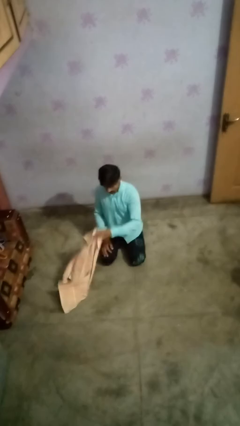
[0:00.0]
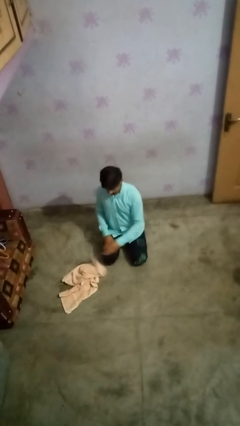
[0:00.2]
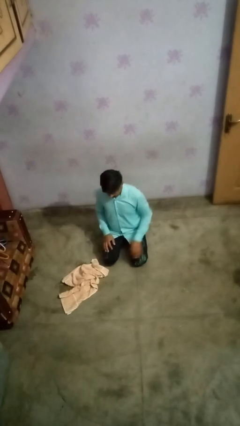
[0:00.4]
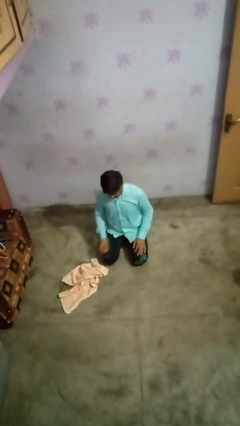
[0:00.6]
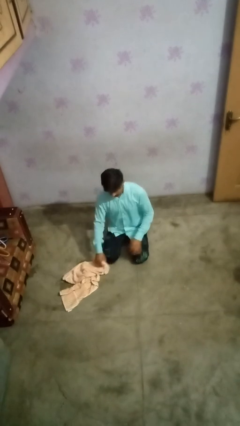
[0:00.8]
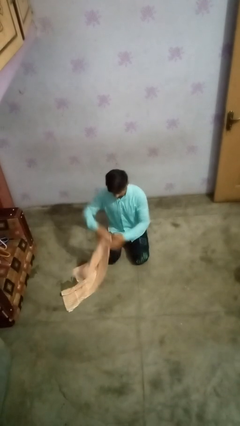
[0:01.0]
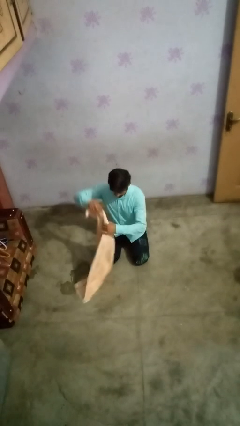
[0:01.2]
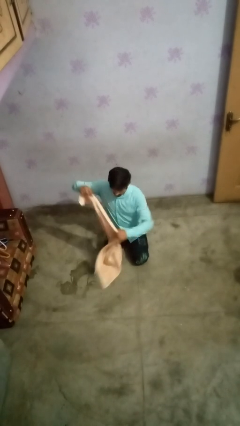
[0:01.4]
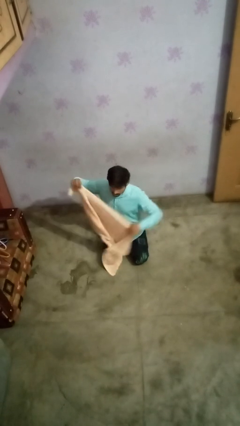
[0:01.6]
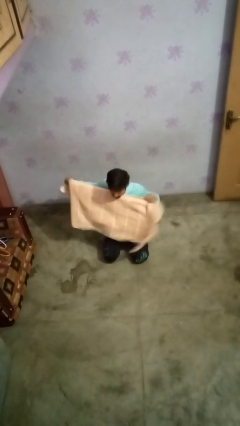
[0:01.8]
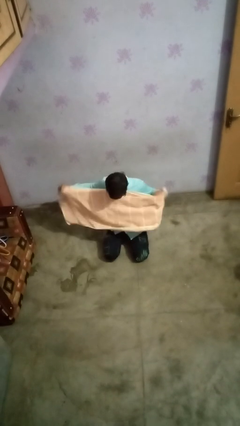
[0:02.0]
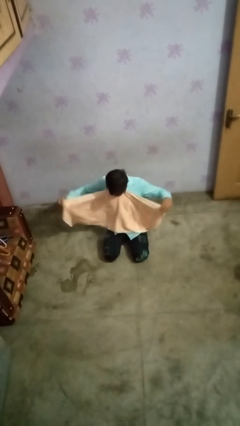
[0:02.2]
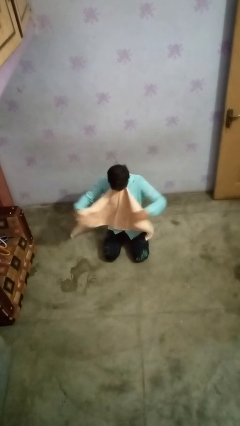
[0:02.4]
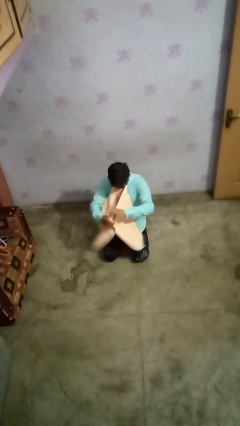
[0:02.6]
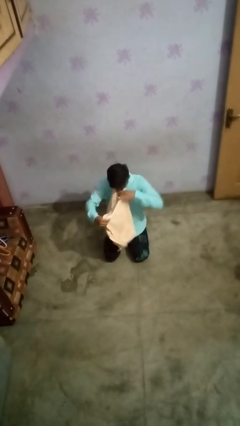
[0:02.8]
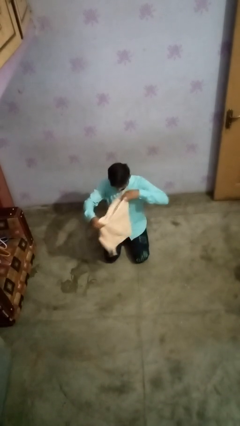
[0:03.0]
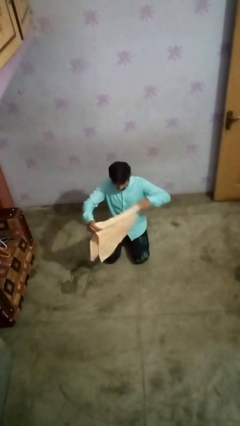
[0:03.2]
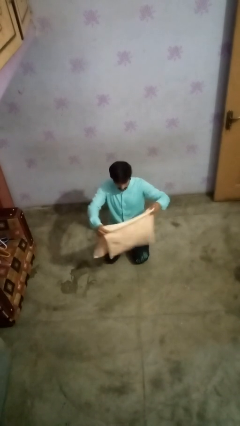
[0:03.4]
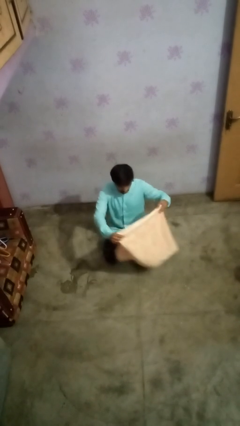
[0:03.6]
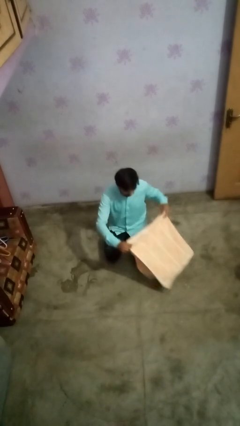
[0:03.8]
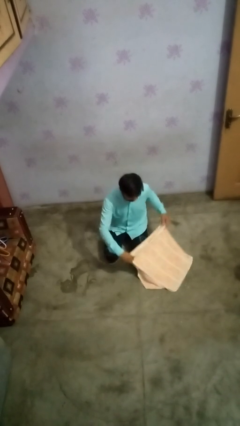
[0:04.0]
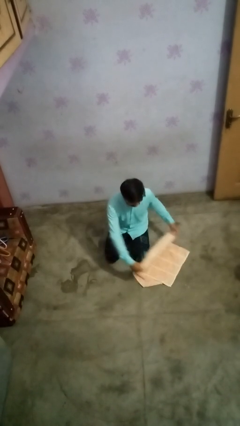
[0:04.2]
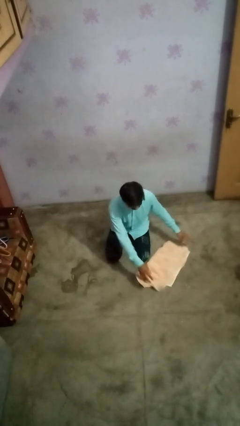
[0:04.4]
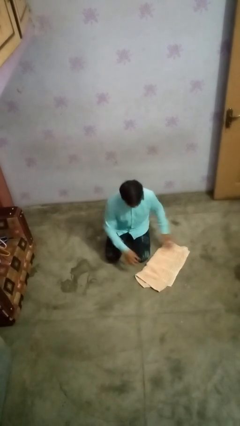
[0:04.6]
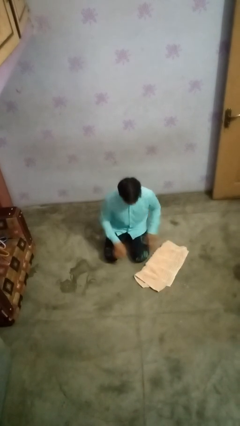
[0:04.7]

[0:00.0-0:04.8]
person folds towel

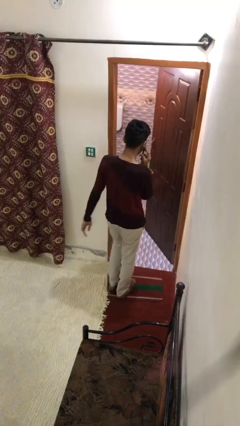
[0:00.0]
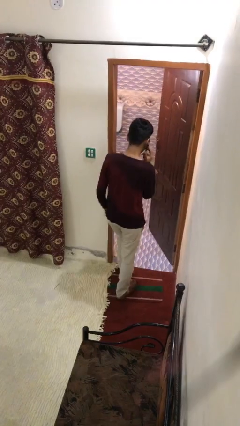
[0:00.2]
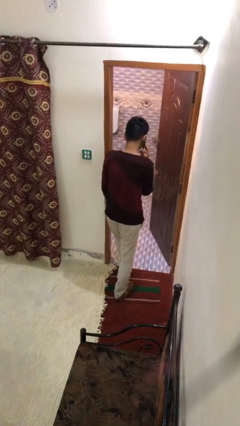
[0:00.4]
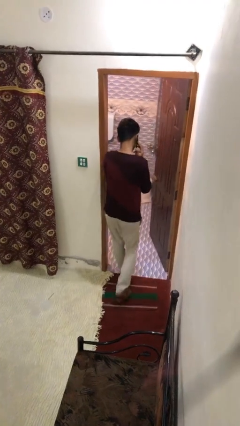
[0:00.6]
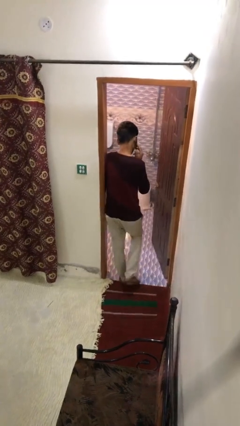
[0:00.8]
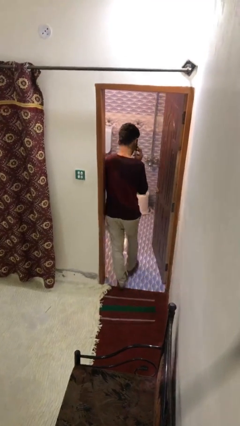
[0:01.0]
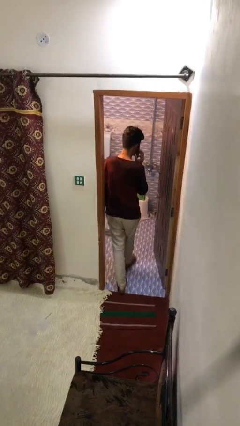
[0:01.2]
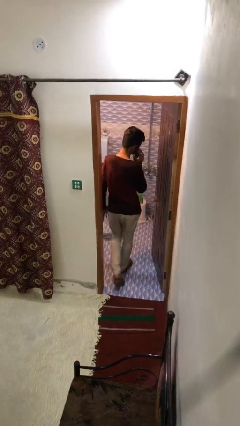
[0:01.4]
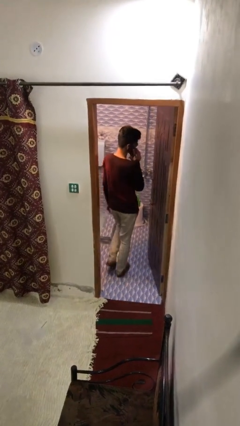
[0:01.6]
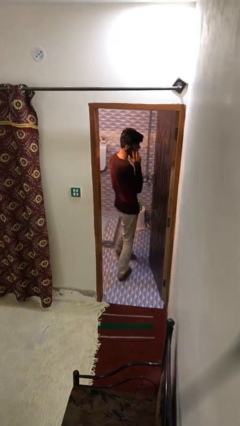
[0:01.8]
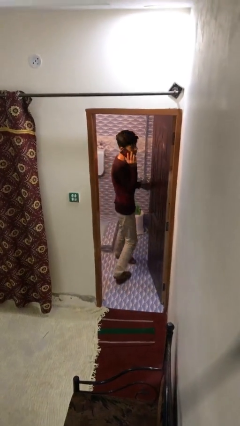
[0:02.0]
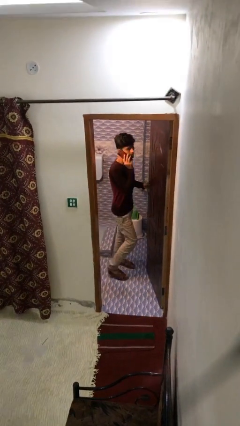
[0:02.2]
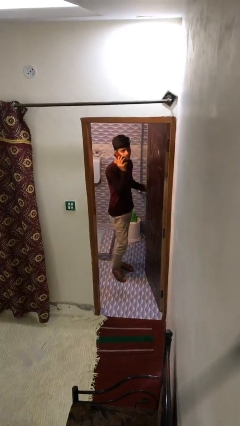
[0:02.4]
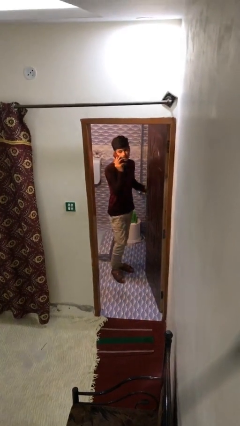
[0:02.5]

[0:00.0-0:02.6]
person exits scene through structure

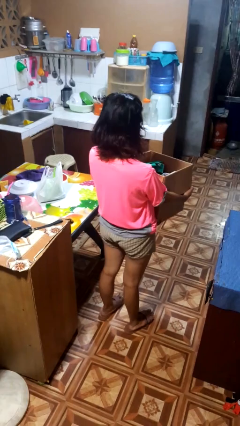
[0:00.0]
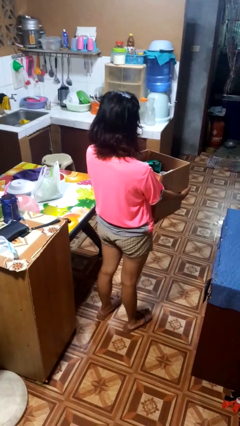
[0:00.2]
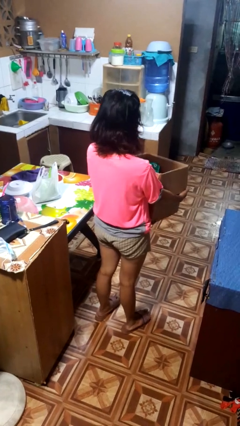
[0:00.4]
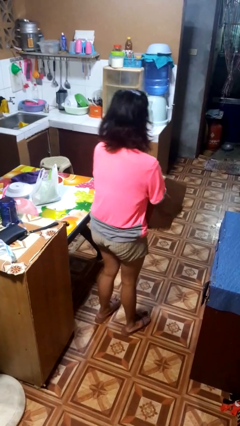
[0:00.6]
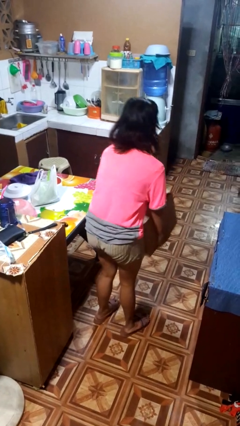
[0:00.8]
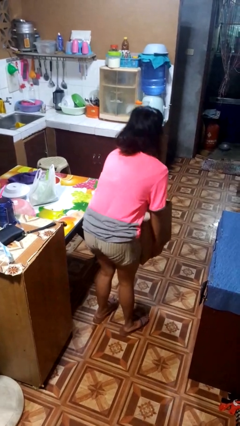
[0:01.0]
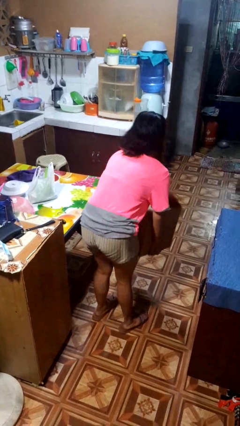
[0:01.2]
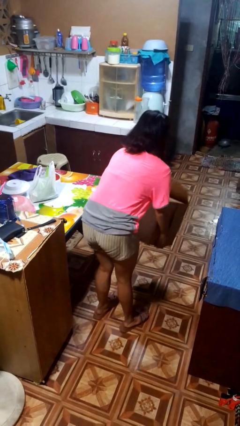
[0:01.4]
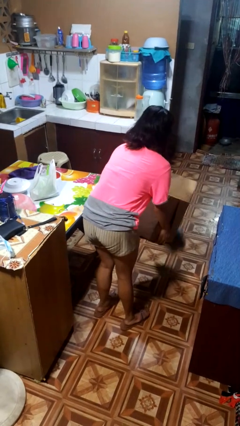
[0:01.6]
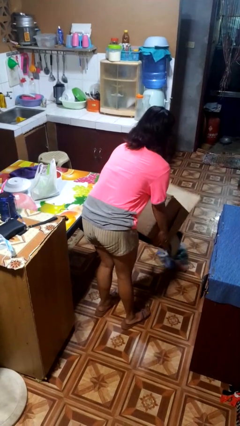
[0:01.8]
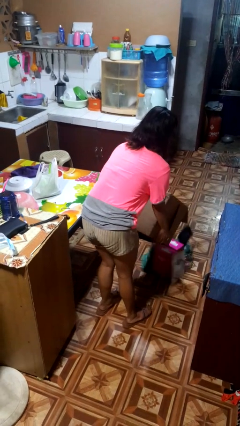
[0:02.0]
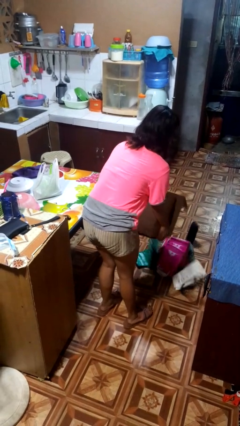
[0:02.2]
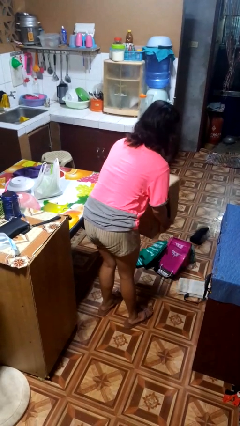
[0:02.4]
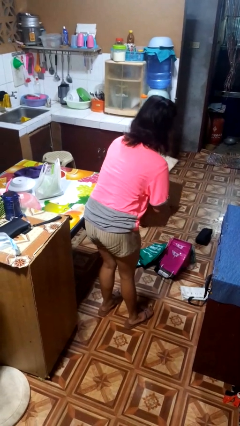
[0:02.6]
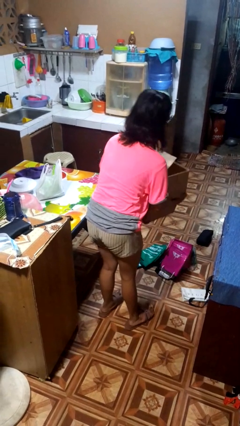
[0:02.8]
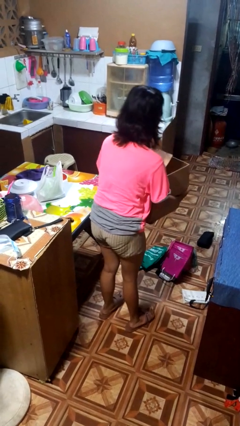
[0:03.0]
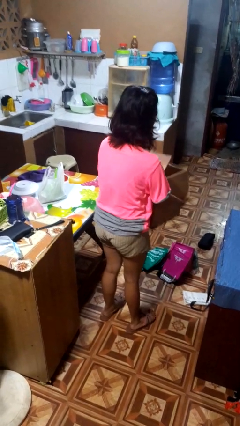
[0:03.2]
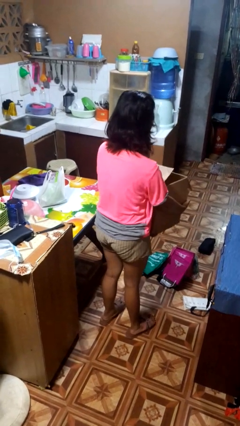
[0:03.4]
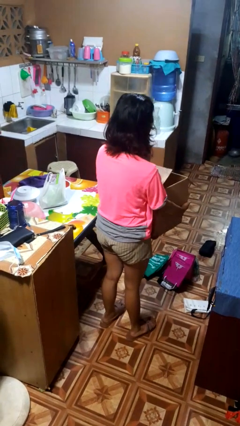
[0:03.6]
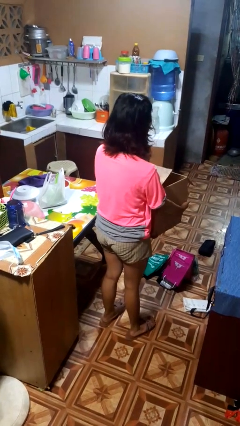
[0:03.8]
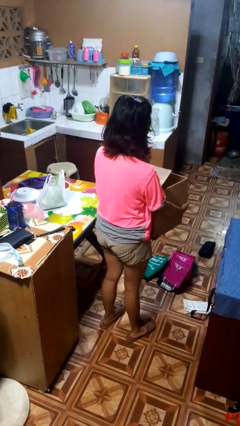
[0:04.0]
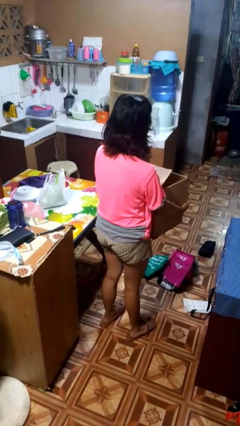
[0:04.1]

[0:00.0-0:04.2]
person unloads box onto floor

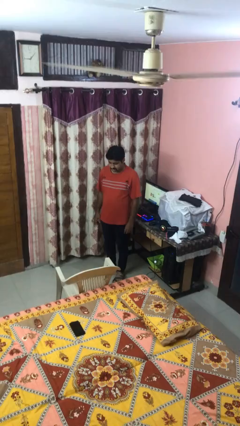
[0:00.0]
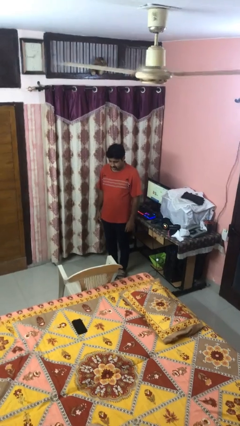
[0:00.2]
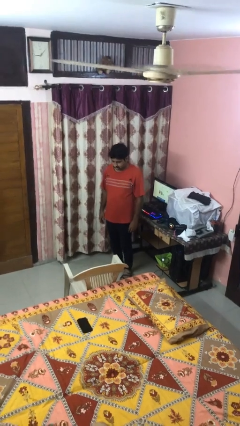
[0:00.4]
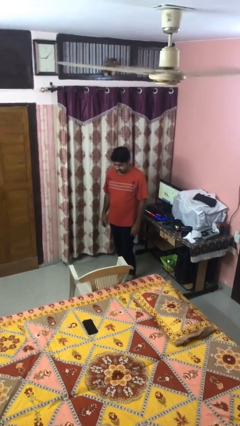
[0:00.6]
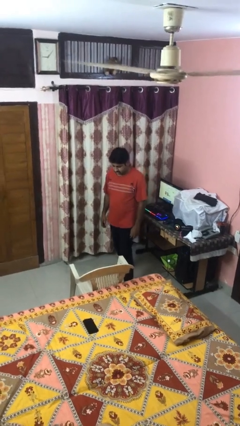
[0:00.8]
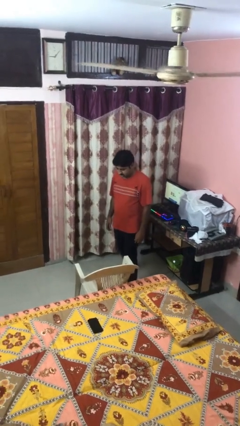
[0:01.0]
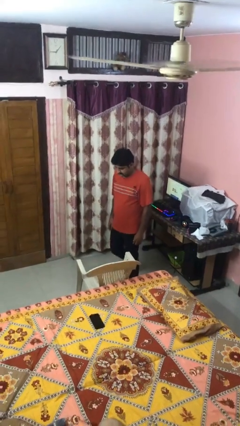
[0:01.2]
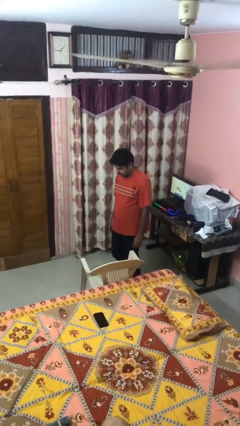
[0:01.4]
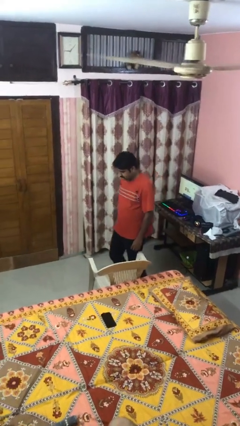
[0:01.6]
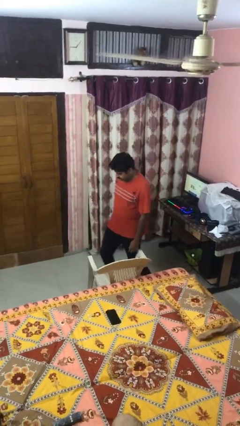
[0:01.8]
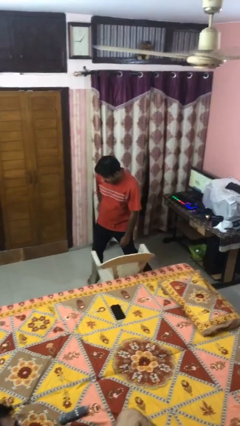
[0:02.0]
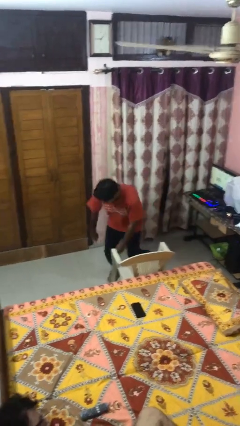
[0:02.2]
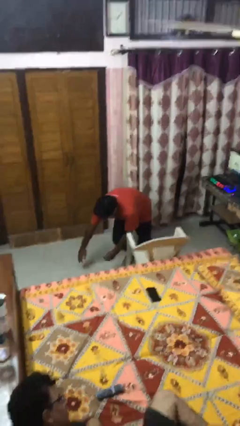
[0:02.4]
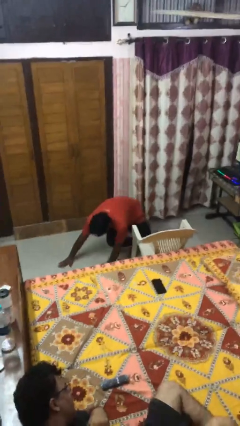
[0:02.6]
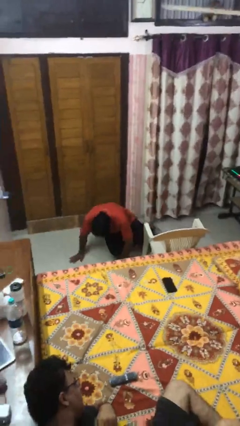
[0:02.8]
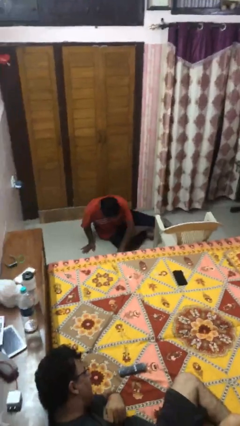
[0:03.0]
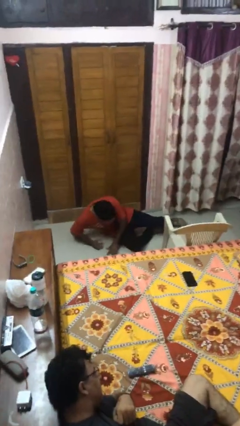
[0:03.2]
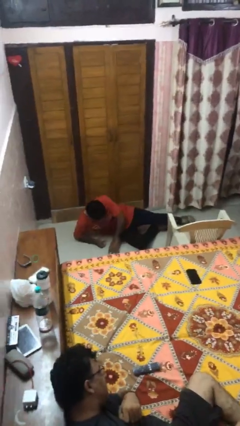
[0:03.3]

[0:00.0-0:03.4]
person trips on object on floor

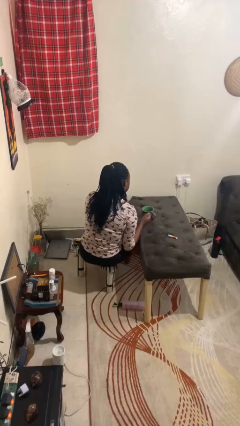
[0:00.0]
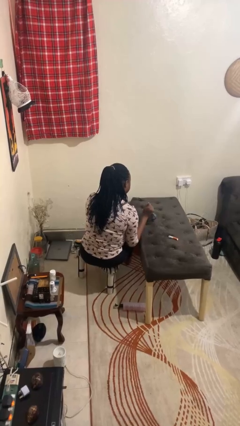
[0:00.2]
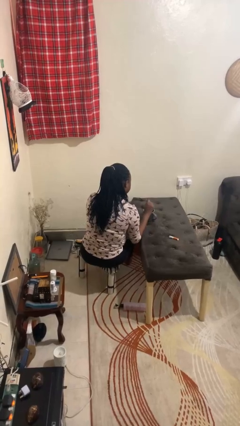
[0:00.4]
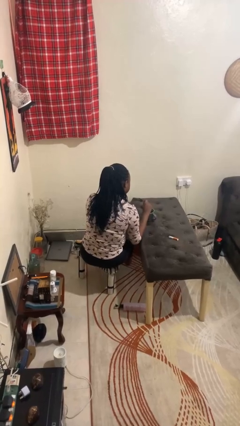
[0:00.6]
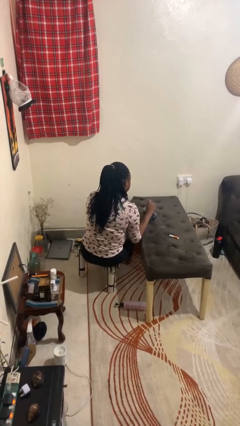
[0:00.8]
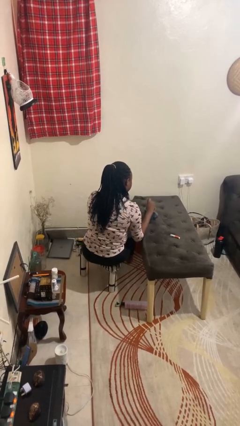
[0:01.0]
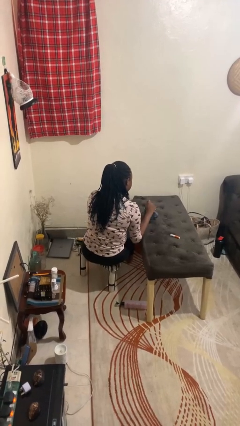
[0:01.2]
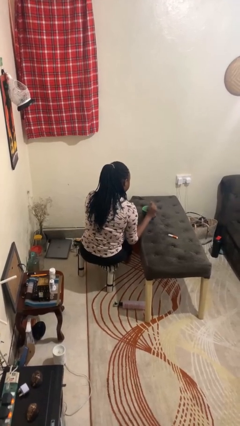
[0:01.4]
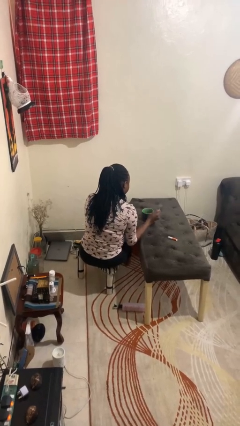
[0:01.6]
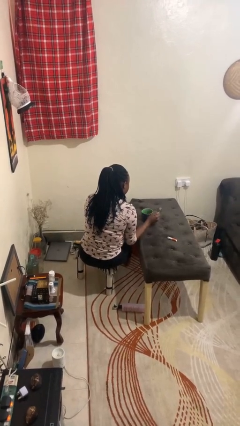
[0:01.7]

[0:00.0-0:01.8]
person stirs mug

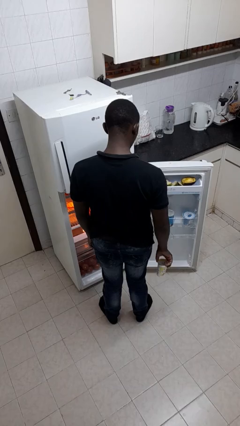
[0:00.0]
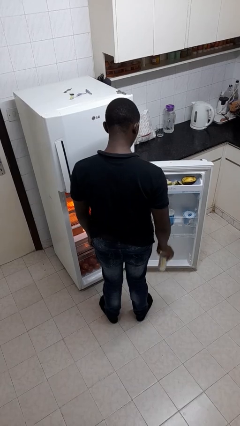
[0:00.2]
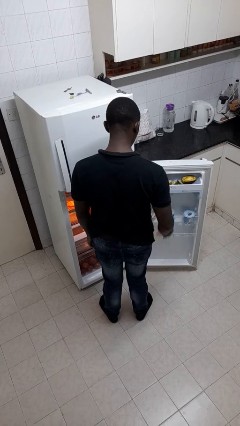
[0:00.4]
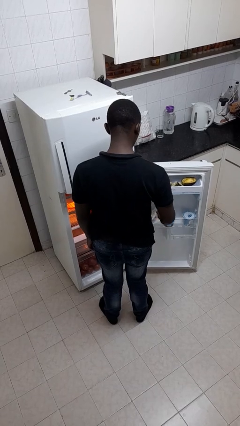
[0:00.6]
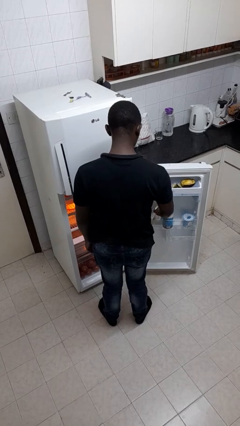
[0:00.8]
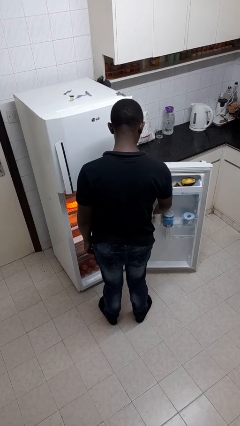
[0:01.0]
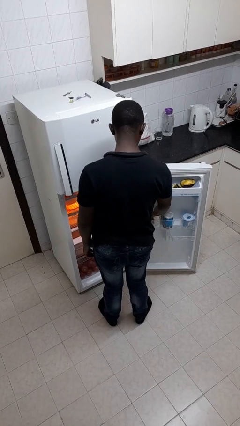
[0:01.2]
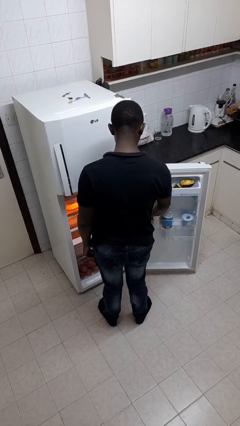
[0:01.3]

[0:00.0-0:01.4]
person puts object into refrigerator
